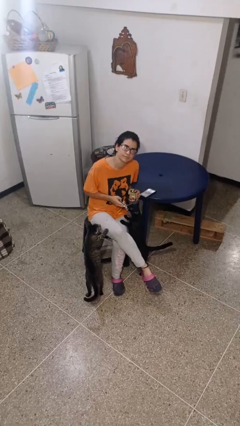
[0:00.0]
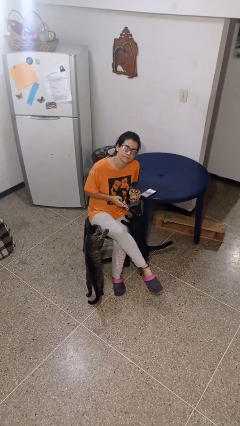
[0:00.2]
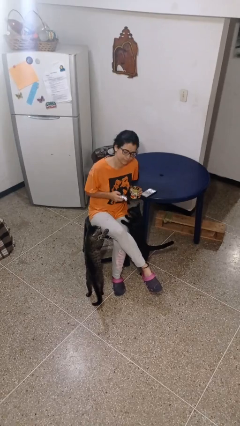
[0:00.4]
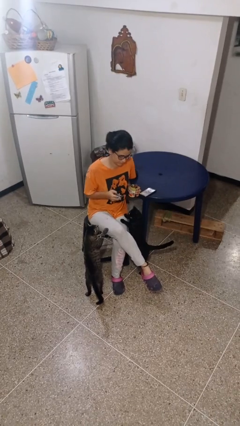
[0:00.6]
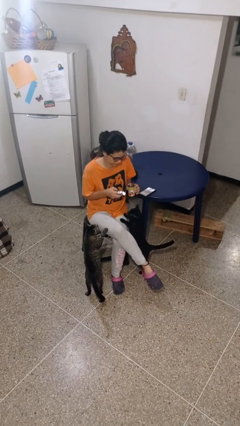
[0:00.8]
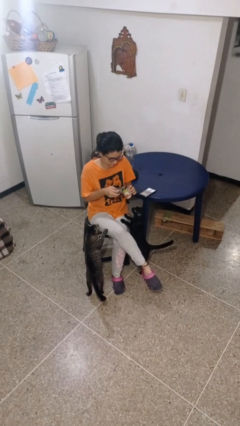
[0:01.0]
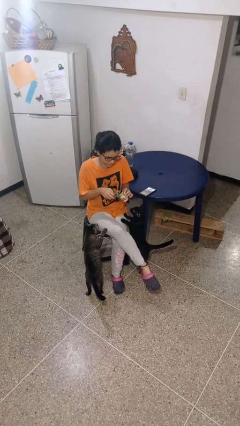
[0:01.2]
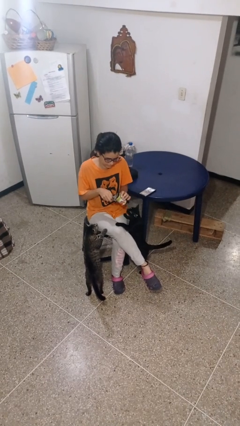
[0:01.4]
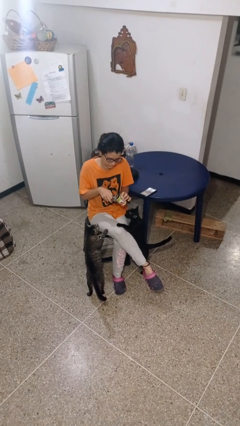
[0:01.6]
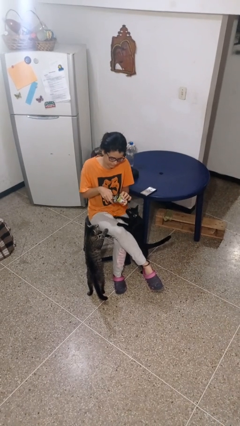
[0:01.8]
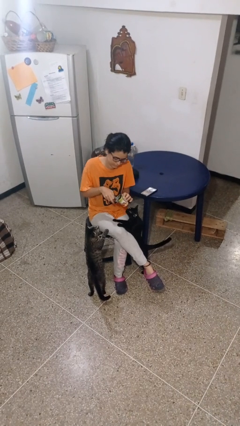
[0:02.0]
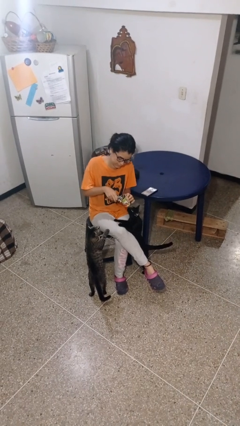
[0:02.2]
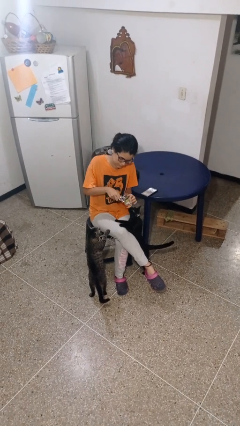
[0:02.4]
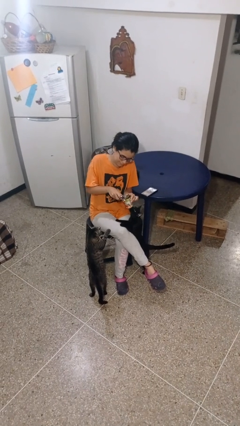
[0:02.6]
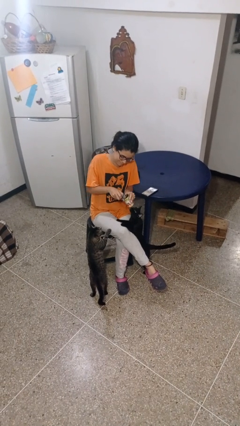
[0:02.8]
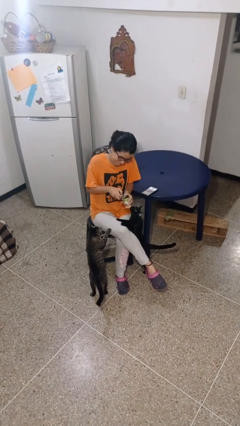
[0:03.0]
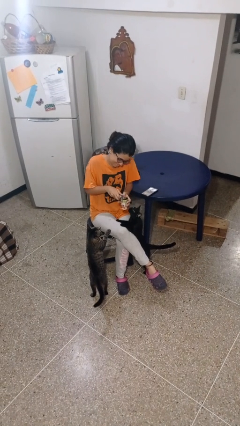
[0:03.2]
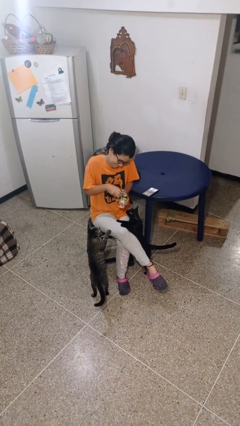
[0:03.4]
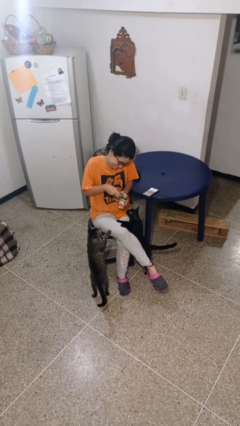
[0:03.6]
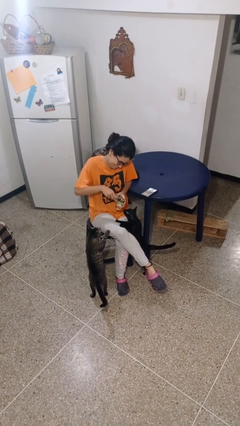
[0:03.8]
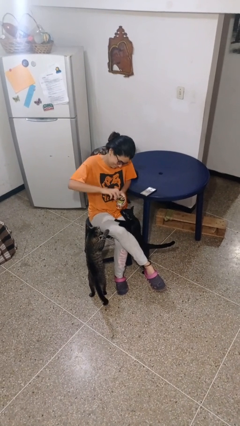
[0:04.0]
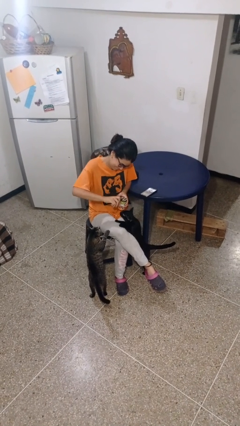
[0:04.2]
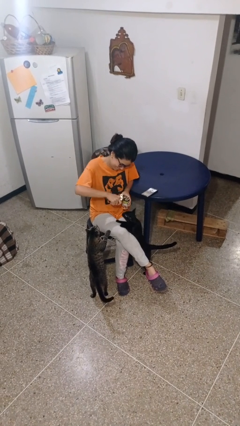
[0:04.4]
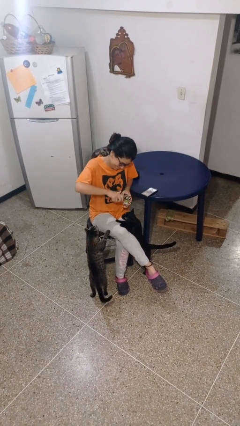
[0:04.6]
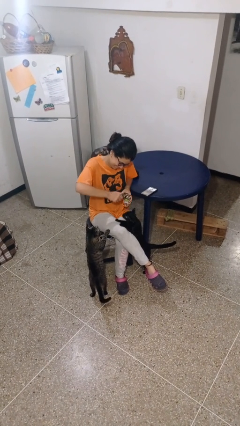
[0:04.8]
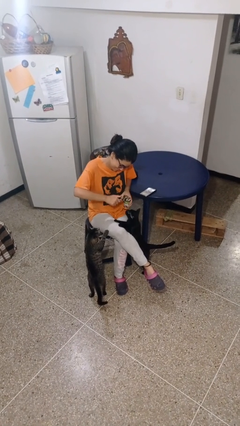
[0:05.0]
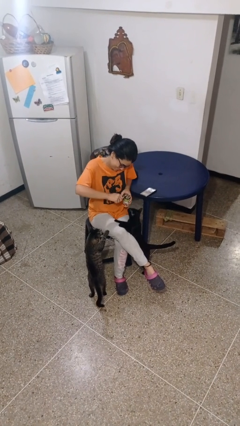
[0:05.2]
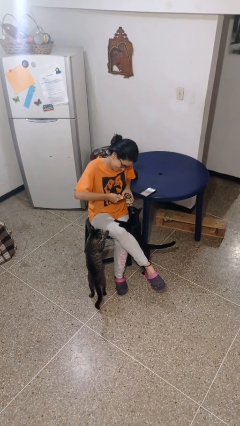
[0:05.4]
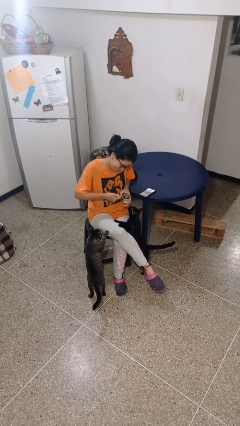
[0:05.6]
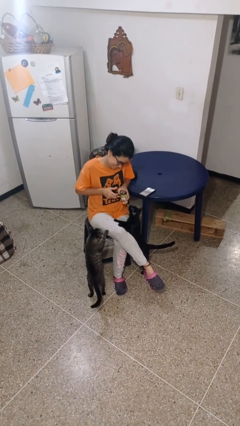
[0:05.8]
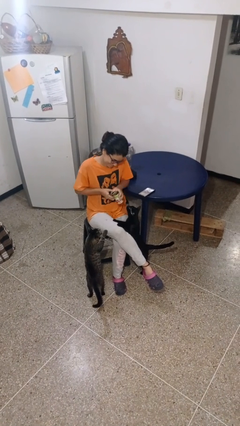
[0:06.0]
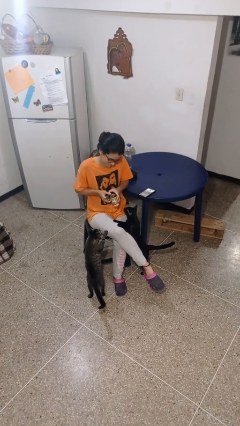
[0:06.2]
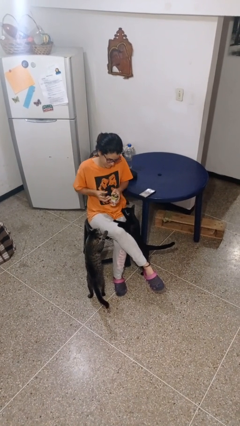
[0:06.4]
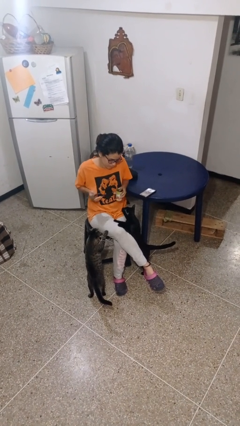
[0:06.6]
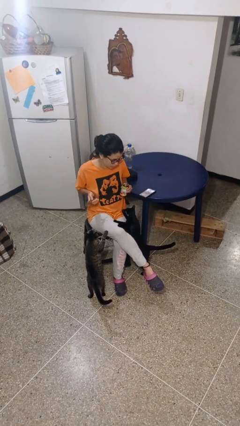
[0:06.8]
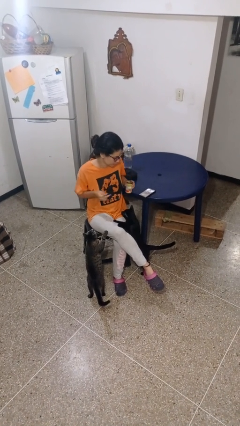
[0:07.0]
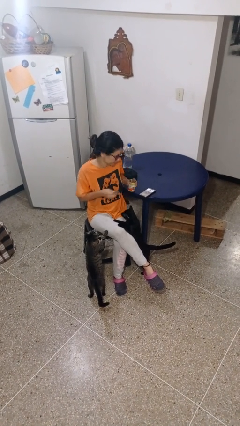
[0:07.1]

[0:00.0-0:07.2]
person opens can with can opener

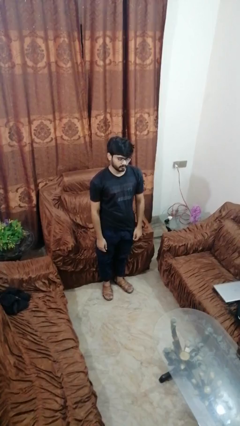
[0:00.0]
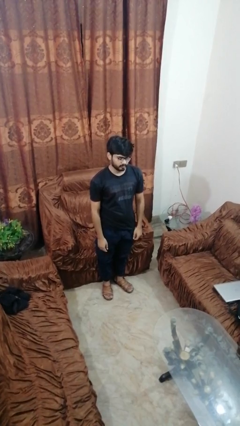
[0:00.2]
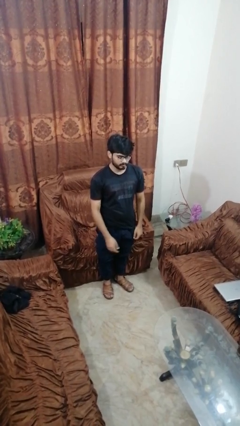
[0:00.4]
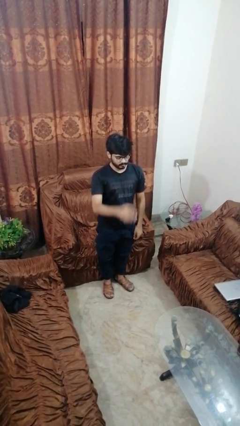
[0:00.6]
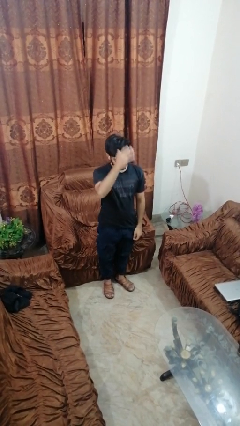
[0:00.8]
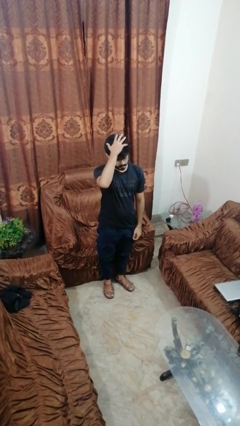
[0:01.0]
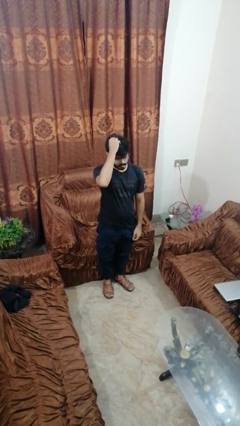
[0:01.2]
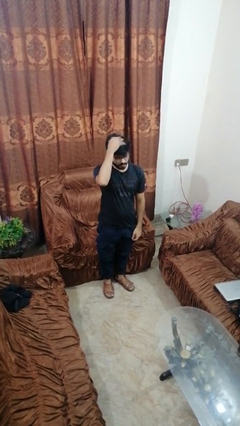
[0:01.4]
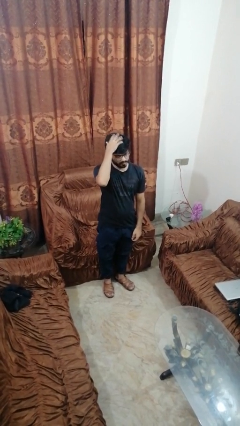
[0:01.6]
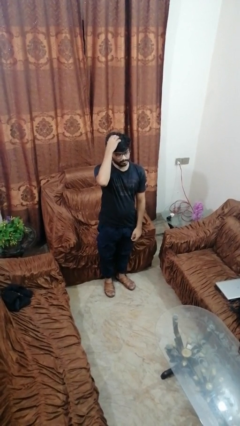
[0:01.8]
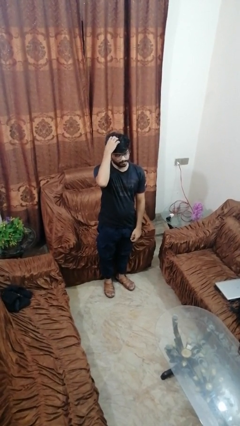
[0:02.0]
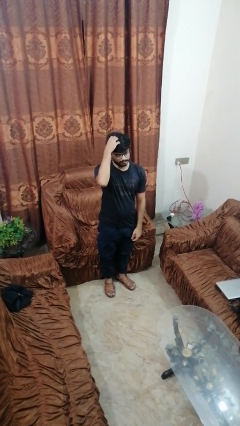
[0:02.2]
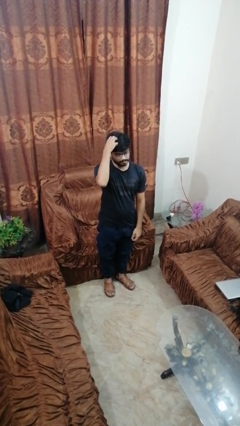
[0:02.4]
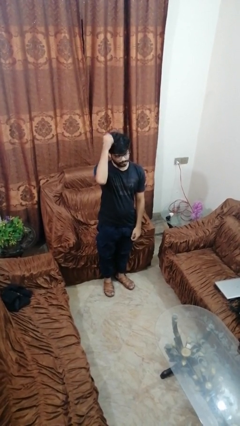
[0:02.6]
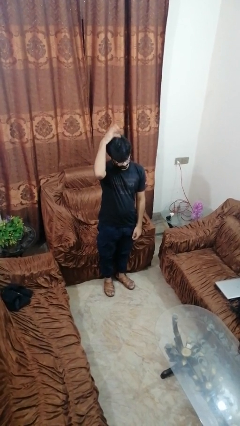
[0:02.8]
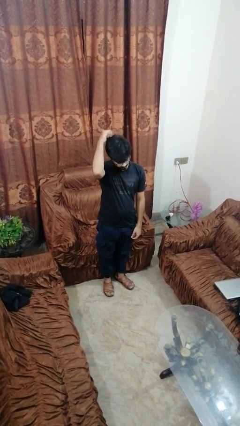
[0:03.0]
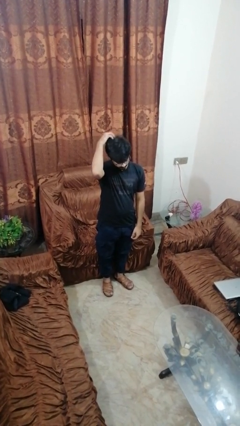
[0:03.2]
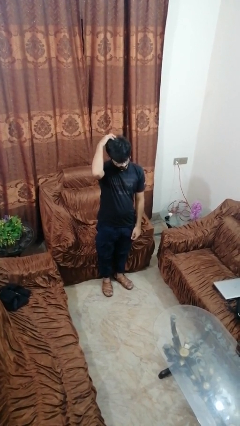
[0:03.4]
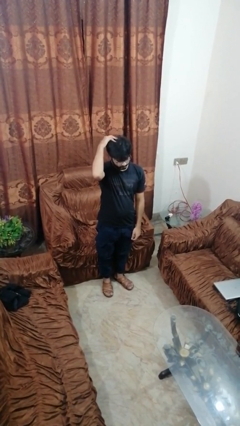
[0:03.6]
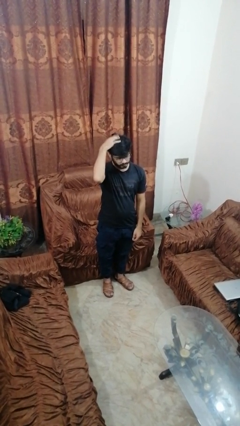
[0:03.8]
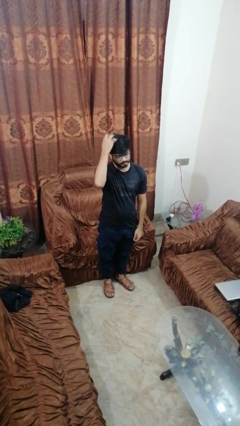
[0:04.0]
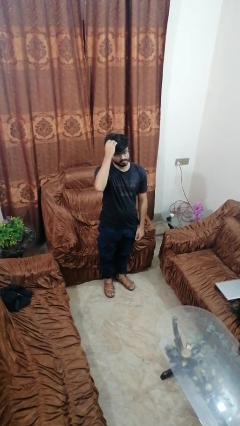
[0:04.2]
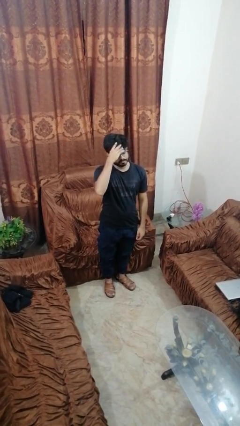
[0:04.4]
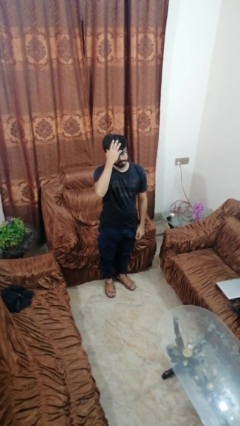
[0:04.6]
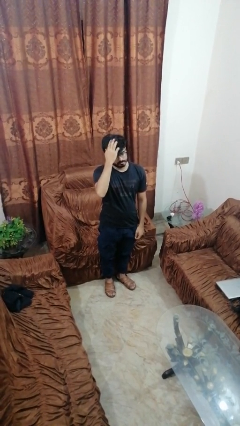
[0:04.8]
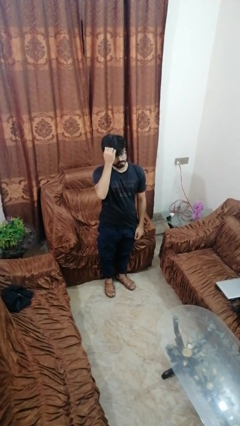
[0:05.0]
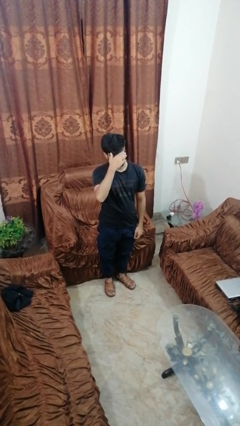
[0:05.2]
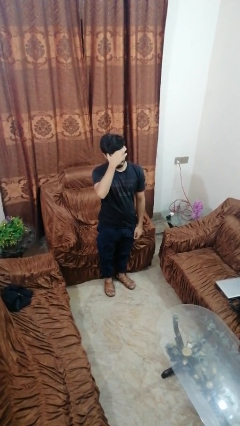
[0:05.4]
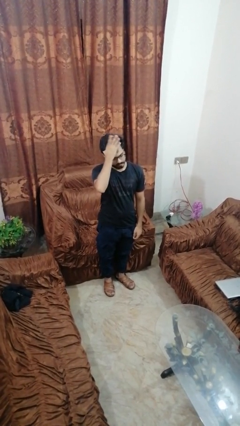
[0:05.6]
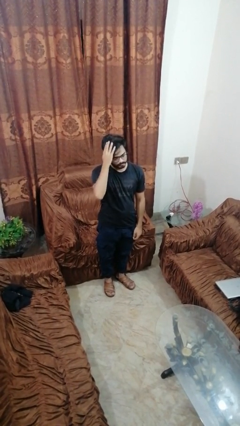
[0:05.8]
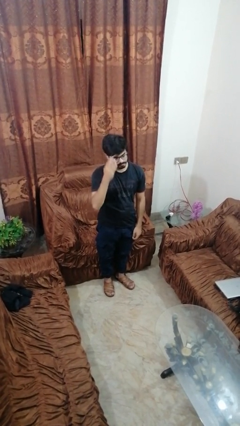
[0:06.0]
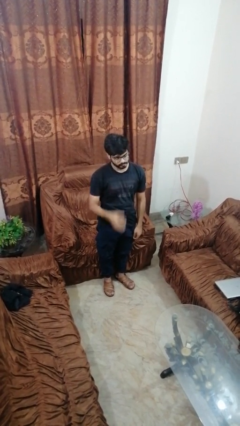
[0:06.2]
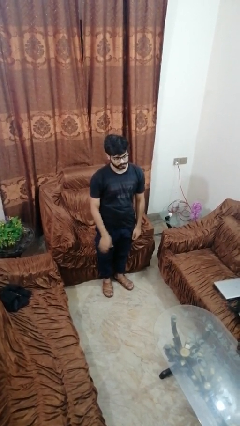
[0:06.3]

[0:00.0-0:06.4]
person scratches face

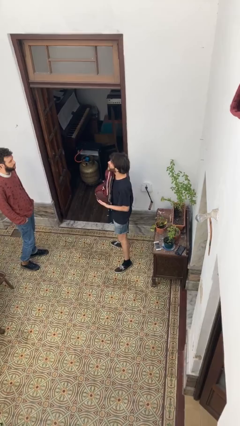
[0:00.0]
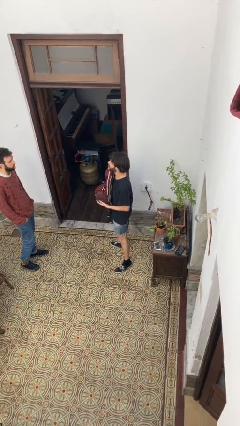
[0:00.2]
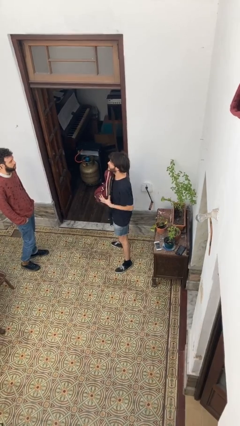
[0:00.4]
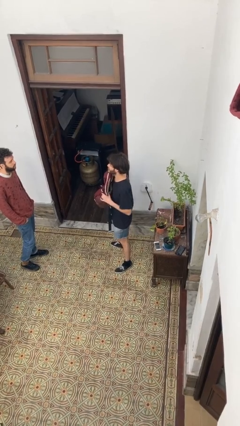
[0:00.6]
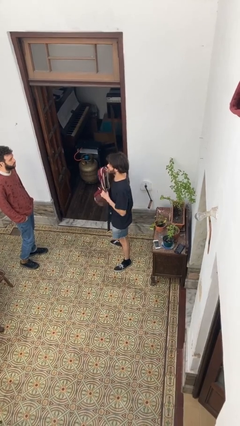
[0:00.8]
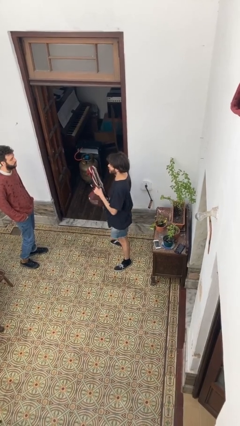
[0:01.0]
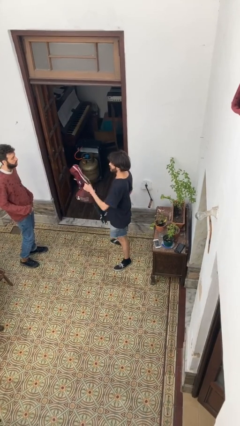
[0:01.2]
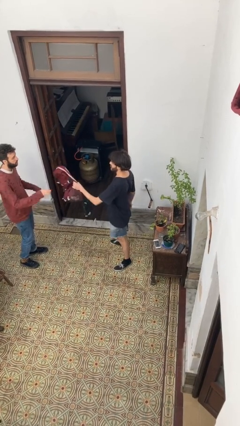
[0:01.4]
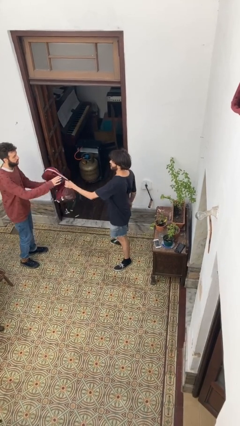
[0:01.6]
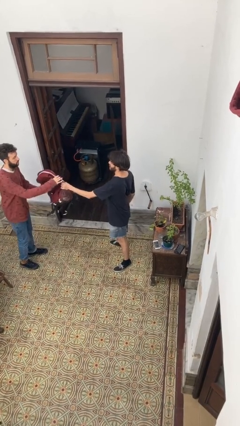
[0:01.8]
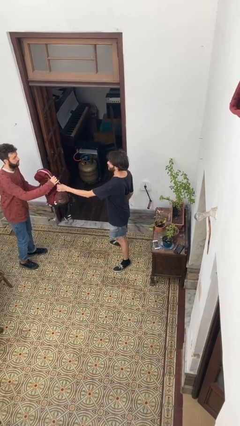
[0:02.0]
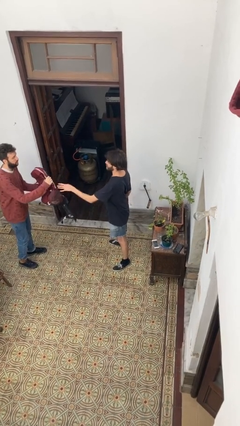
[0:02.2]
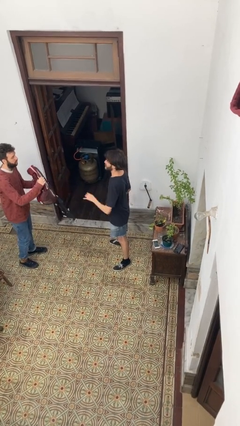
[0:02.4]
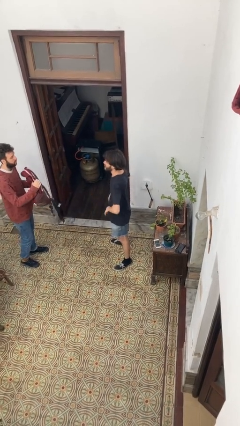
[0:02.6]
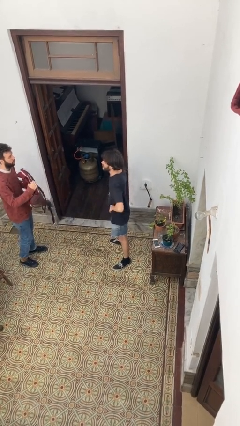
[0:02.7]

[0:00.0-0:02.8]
person transfers object to person

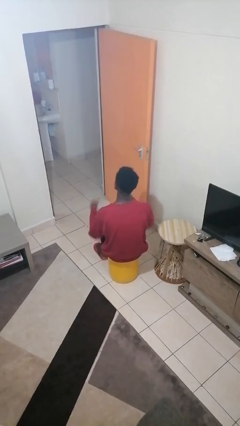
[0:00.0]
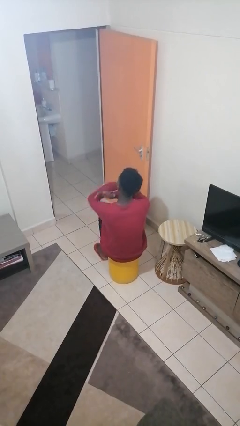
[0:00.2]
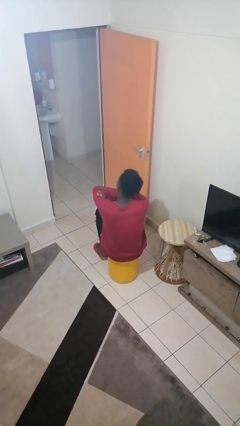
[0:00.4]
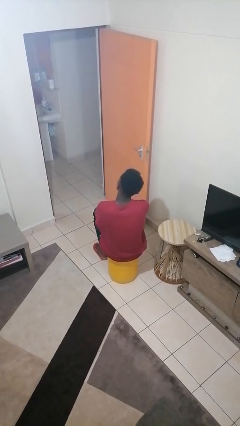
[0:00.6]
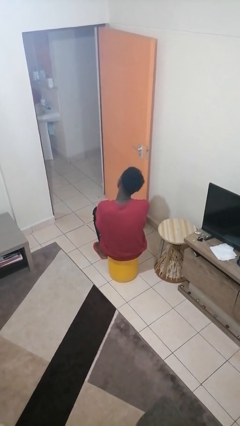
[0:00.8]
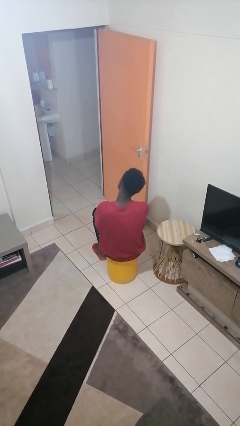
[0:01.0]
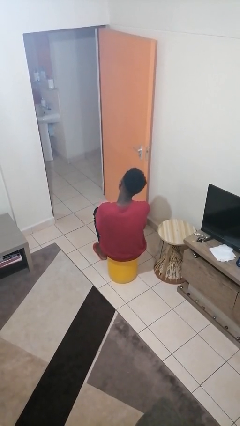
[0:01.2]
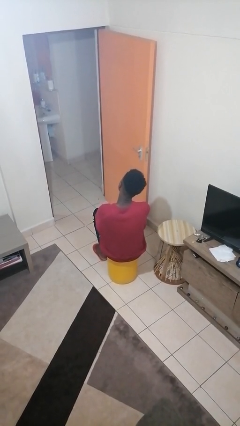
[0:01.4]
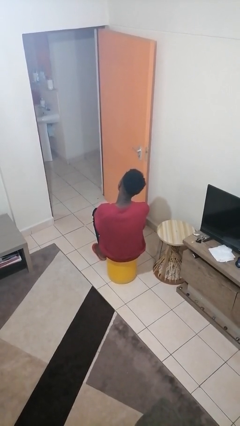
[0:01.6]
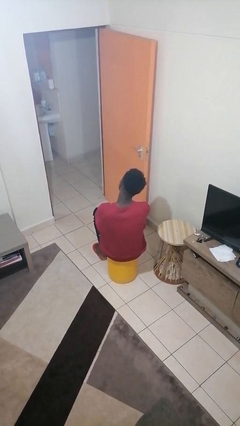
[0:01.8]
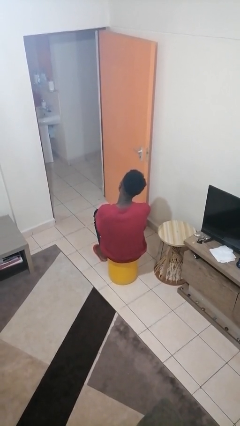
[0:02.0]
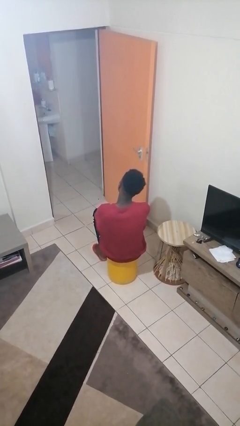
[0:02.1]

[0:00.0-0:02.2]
person crosses arms
